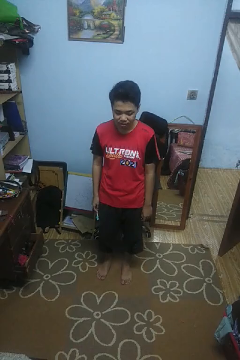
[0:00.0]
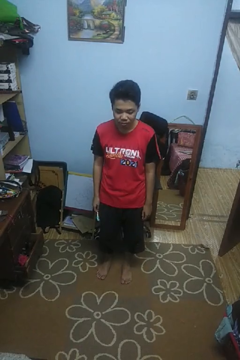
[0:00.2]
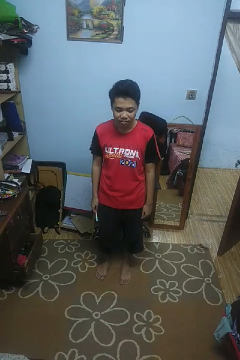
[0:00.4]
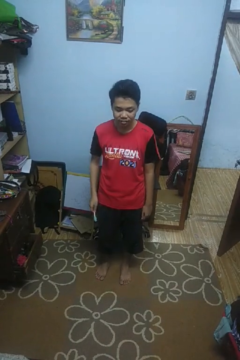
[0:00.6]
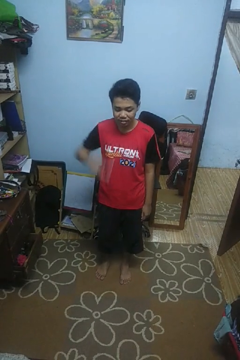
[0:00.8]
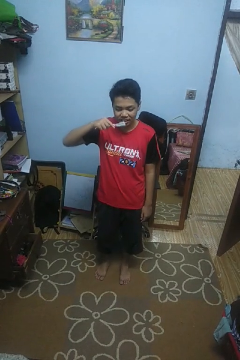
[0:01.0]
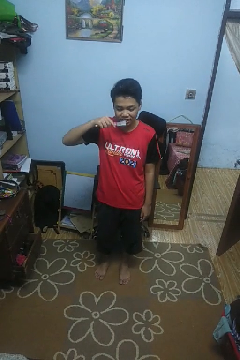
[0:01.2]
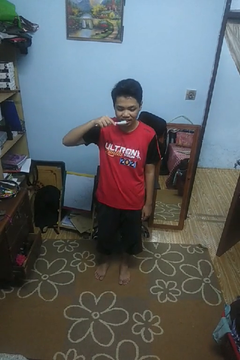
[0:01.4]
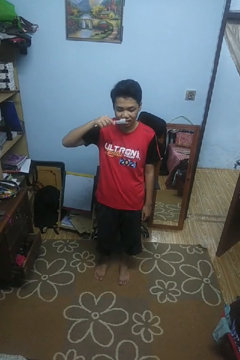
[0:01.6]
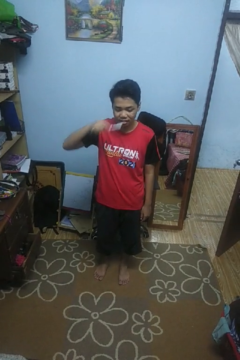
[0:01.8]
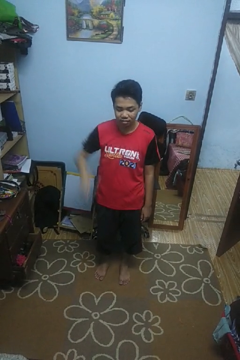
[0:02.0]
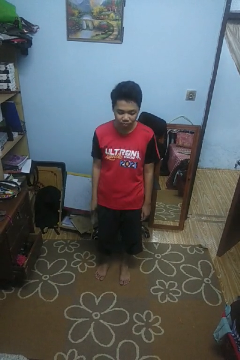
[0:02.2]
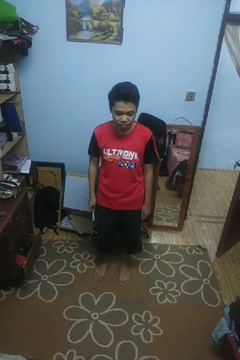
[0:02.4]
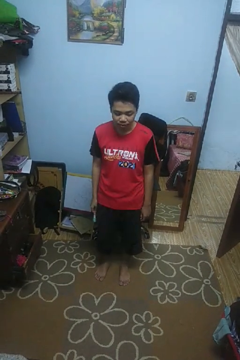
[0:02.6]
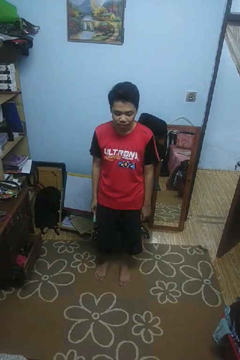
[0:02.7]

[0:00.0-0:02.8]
person brushes teeth

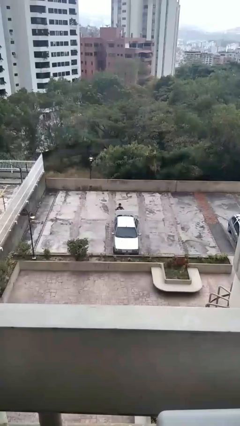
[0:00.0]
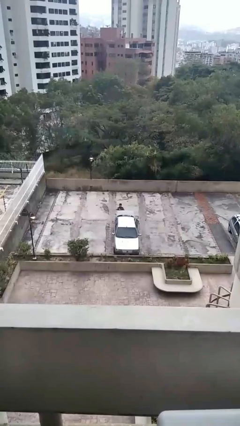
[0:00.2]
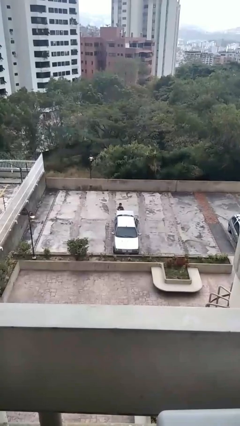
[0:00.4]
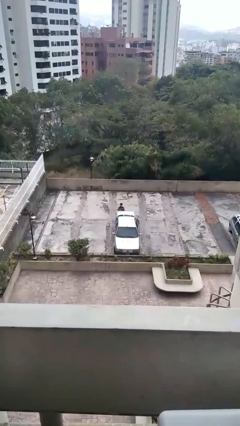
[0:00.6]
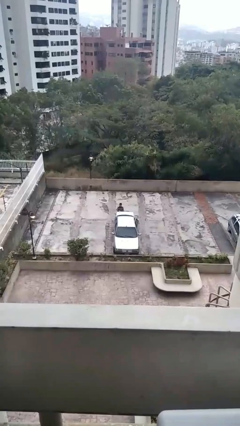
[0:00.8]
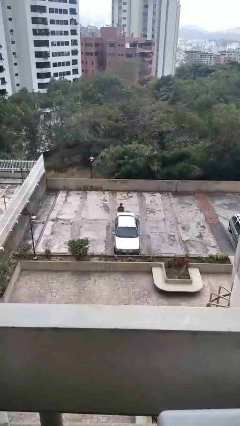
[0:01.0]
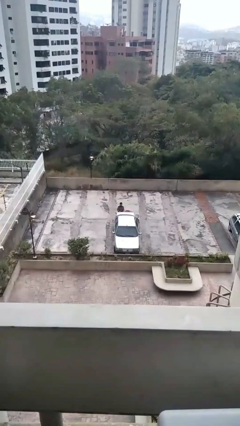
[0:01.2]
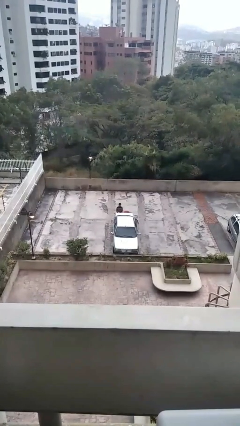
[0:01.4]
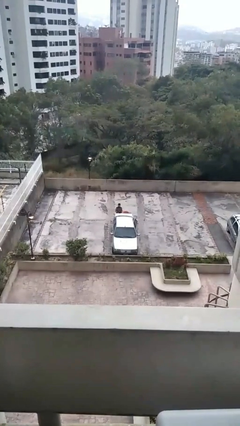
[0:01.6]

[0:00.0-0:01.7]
person closes car trunk

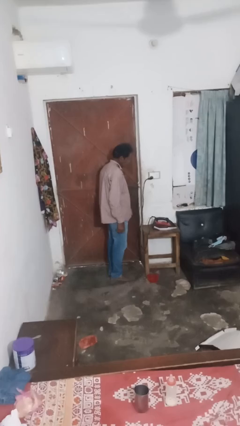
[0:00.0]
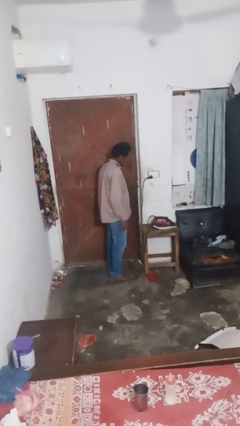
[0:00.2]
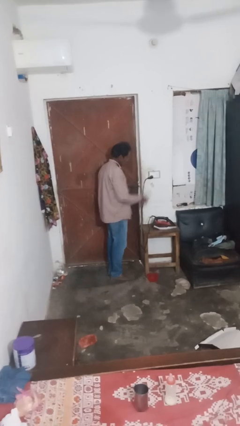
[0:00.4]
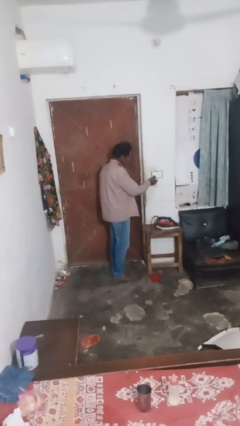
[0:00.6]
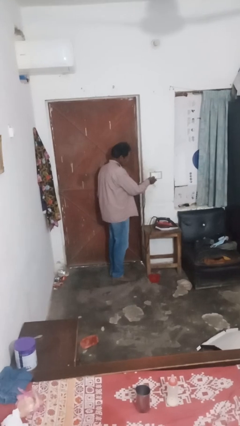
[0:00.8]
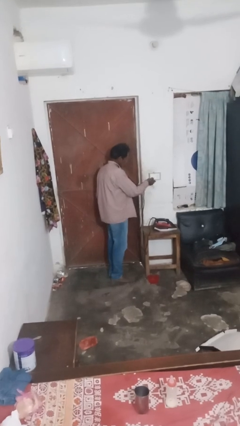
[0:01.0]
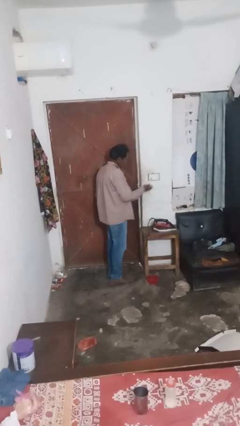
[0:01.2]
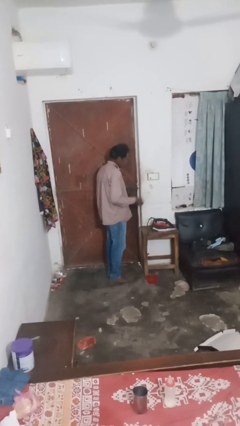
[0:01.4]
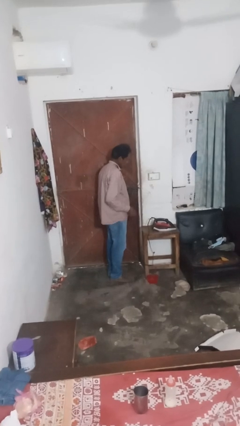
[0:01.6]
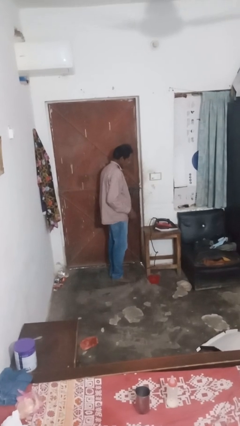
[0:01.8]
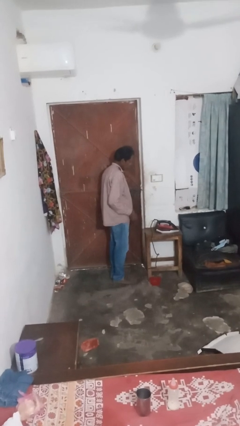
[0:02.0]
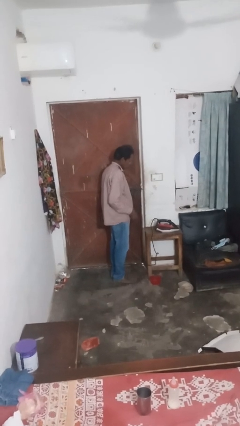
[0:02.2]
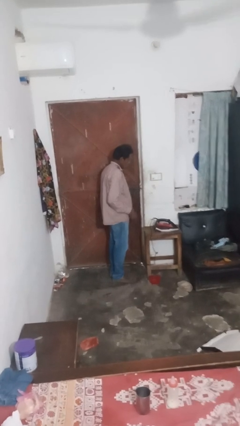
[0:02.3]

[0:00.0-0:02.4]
person unplugs from electrical socket

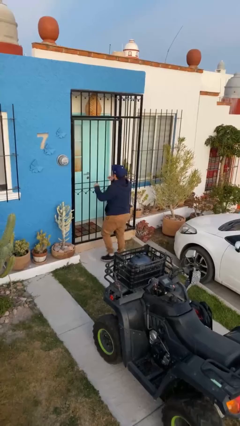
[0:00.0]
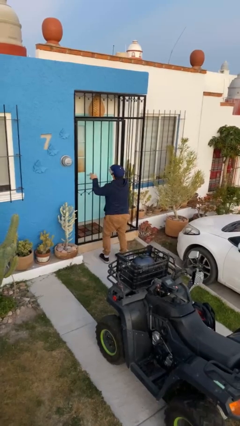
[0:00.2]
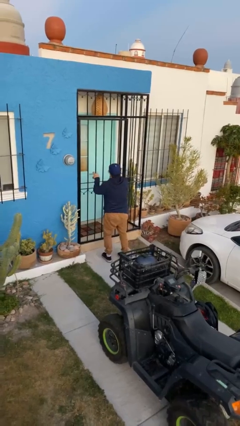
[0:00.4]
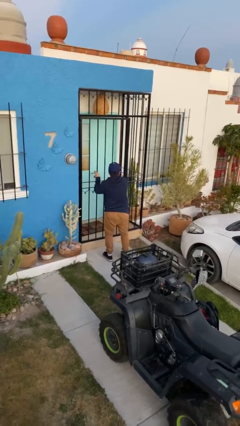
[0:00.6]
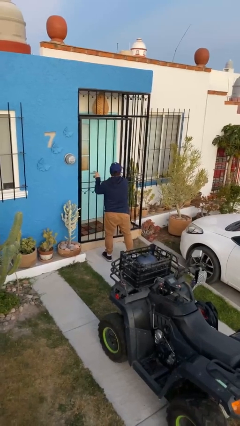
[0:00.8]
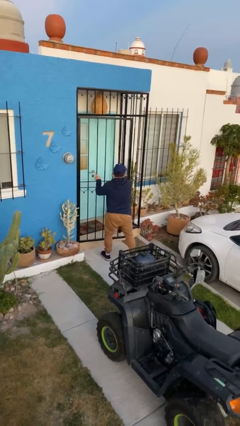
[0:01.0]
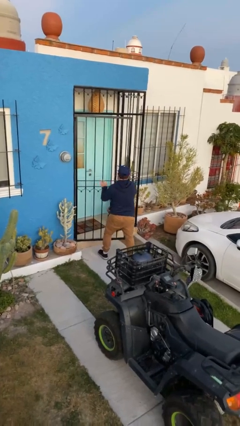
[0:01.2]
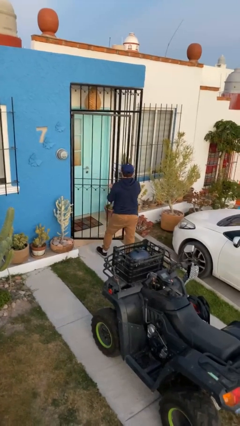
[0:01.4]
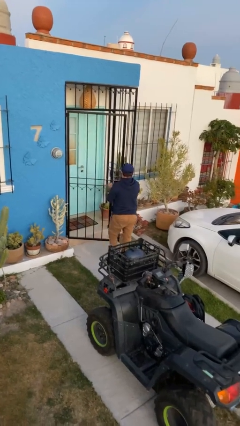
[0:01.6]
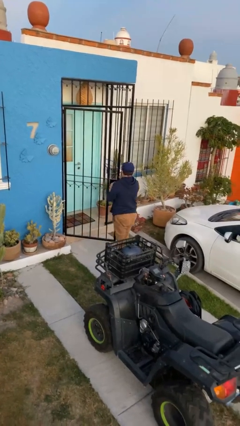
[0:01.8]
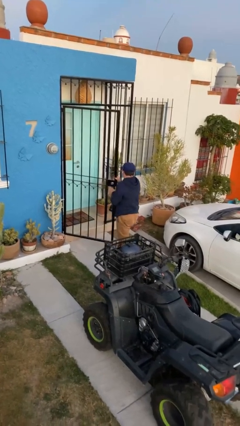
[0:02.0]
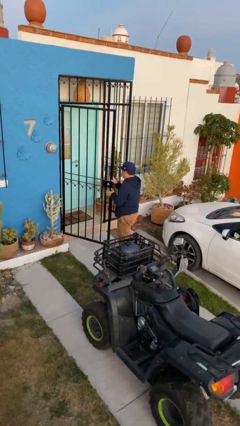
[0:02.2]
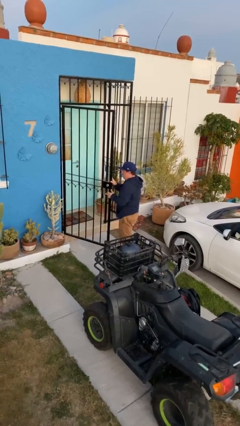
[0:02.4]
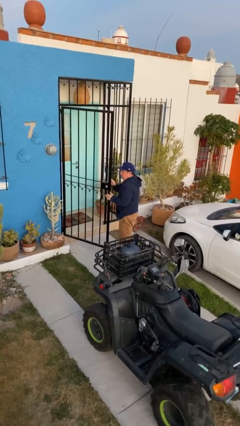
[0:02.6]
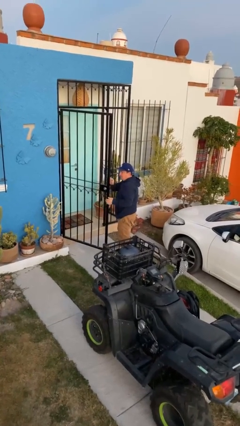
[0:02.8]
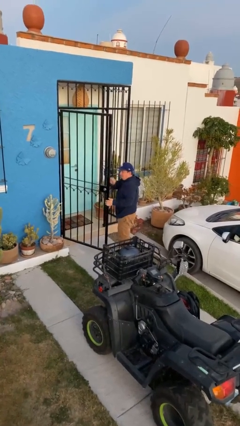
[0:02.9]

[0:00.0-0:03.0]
person opens facility door

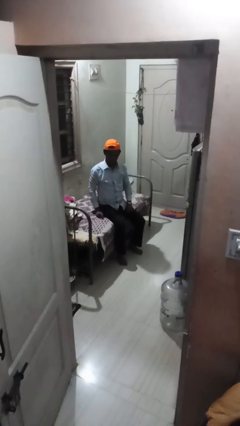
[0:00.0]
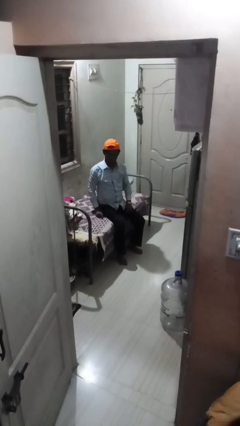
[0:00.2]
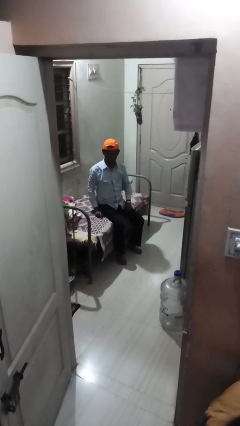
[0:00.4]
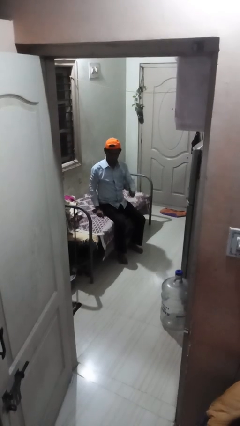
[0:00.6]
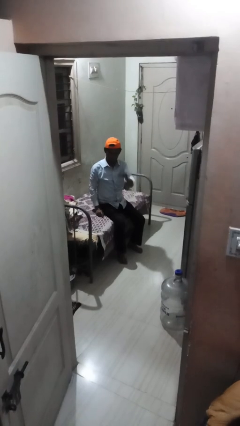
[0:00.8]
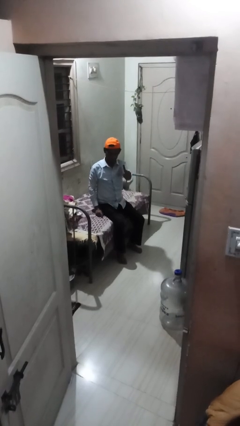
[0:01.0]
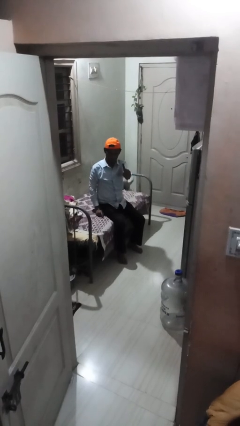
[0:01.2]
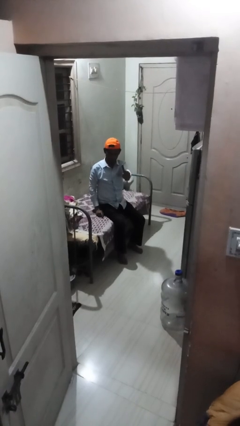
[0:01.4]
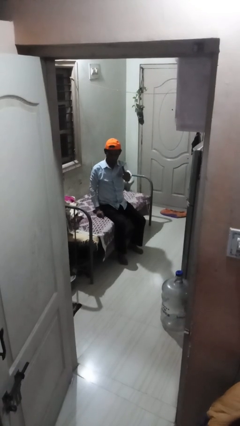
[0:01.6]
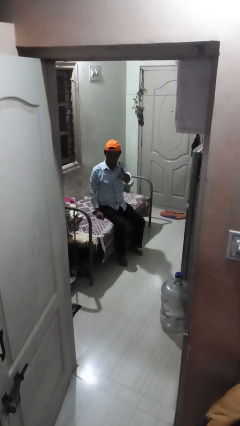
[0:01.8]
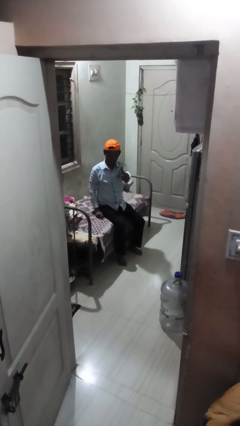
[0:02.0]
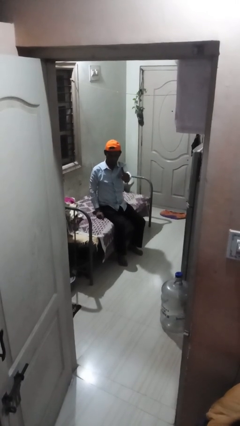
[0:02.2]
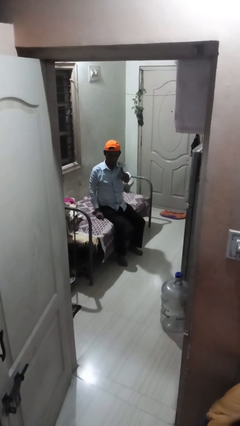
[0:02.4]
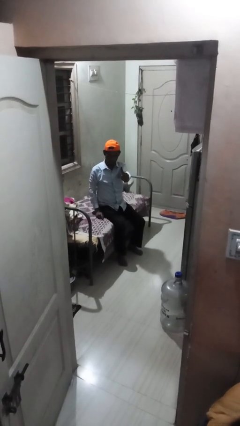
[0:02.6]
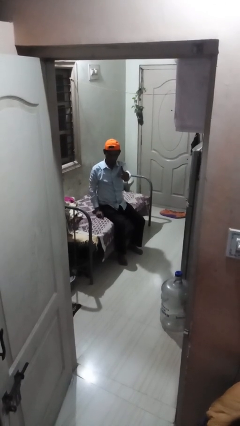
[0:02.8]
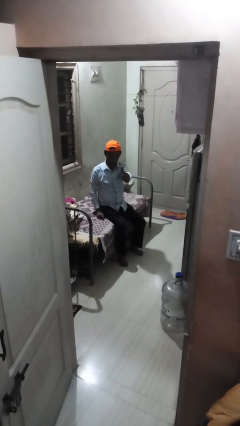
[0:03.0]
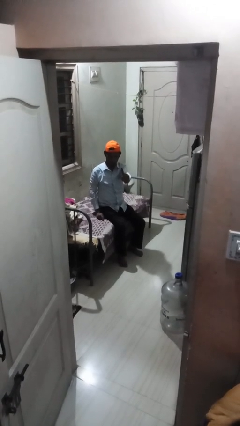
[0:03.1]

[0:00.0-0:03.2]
person gestures number one

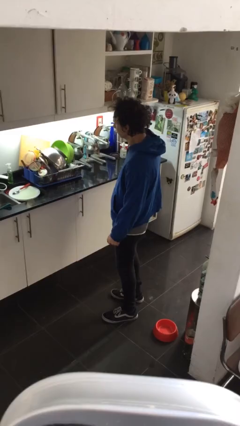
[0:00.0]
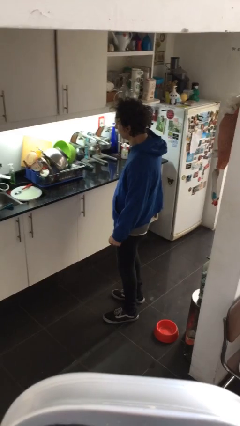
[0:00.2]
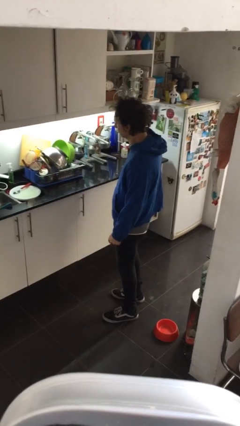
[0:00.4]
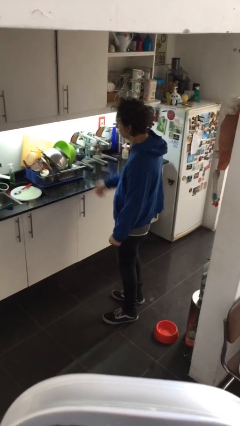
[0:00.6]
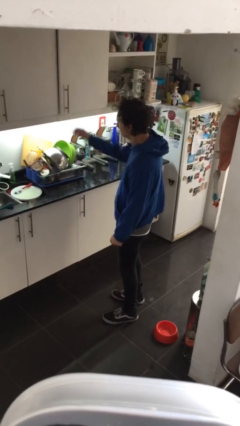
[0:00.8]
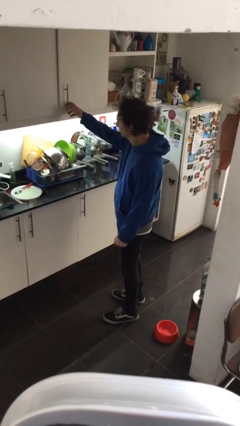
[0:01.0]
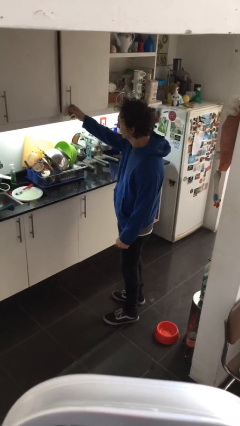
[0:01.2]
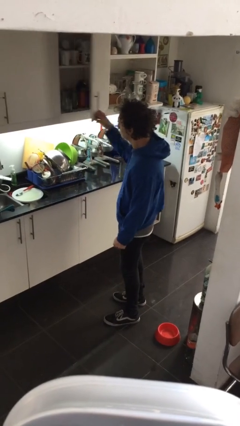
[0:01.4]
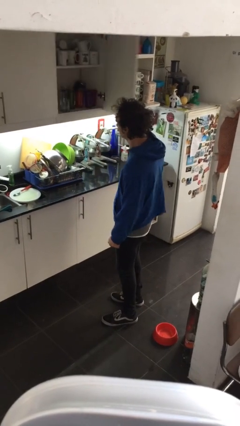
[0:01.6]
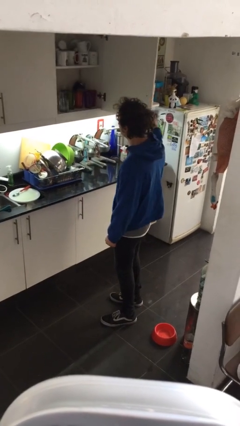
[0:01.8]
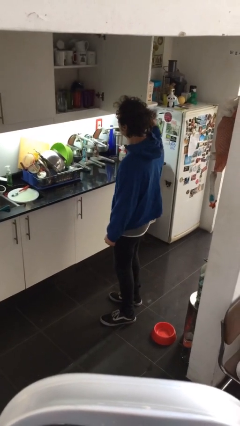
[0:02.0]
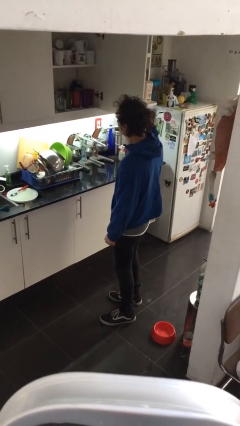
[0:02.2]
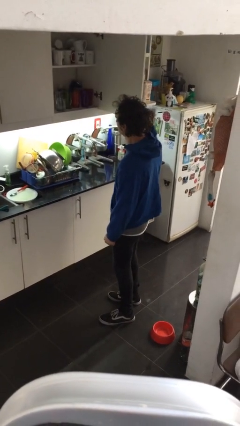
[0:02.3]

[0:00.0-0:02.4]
person opens cabinet

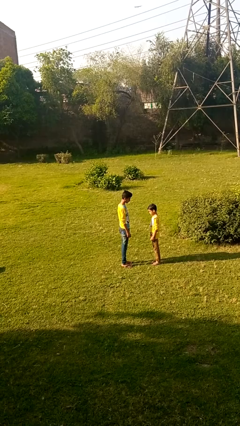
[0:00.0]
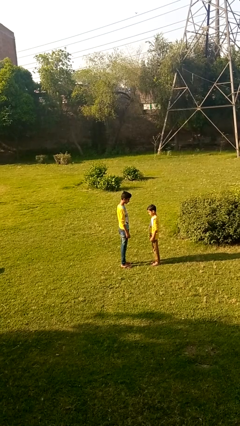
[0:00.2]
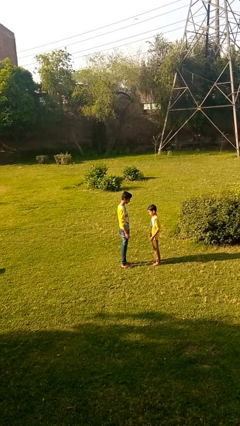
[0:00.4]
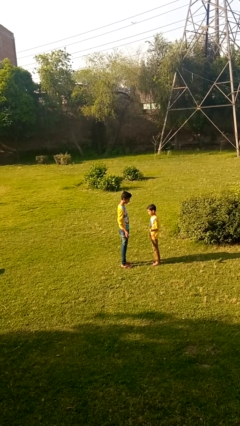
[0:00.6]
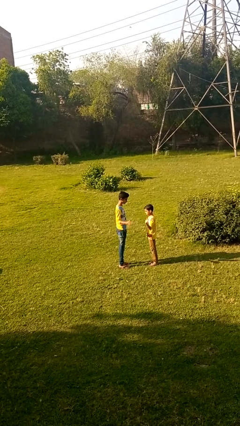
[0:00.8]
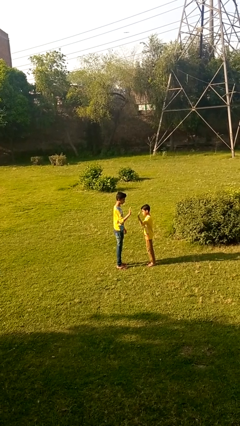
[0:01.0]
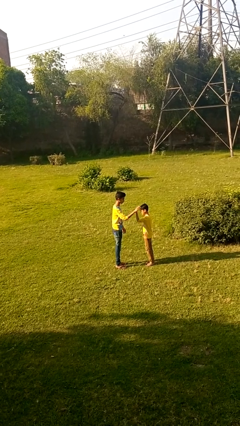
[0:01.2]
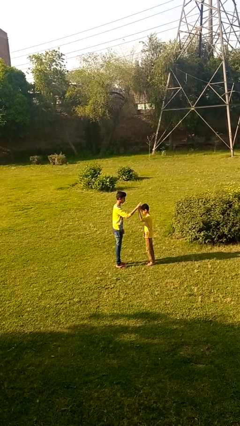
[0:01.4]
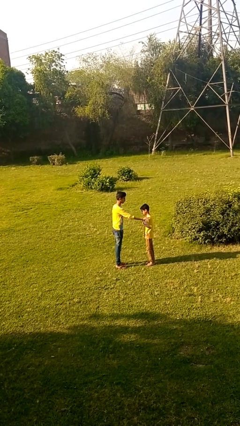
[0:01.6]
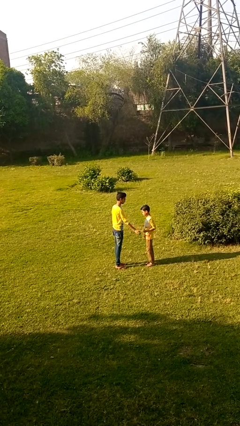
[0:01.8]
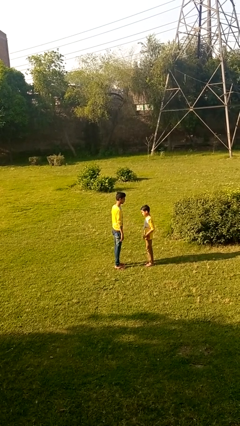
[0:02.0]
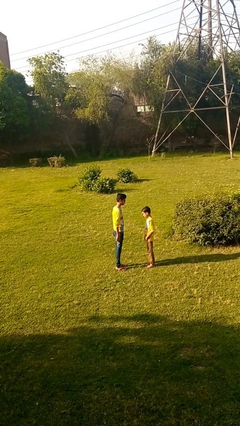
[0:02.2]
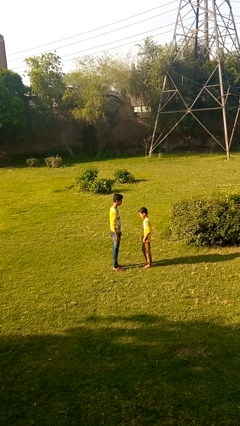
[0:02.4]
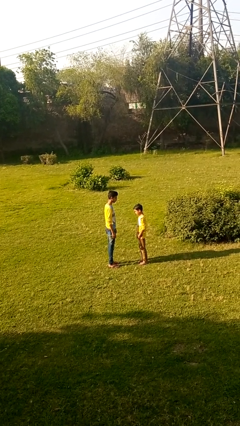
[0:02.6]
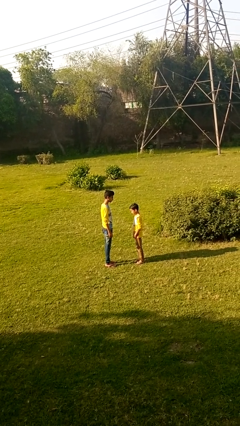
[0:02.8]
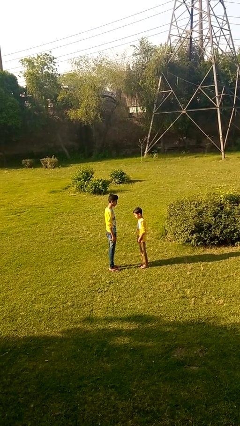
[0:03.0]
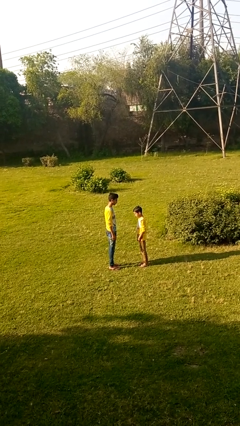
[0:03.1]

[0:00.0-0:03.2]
person highfives hand
